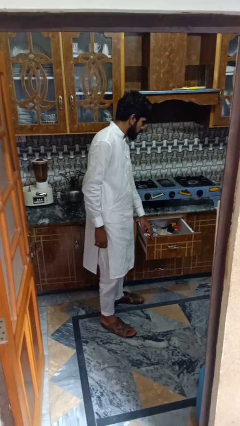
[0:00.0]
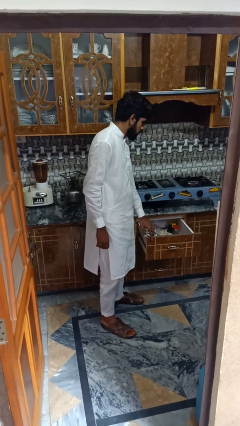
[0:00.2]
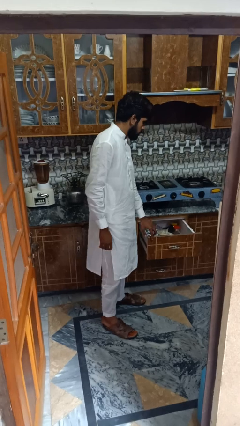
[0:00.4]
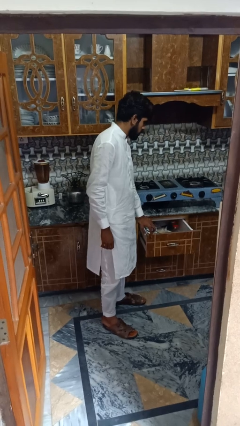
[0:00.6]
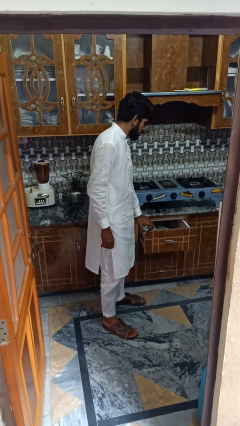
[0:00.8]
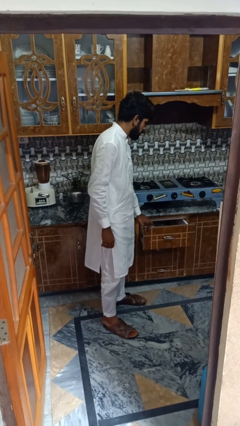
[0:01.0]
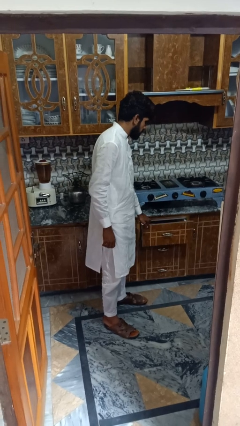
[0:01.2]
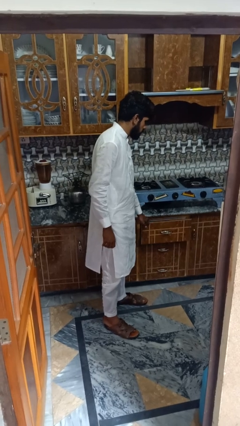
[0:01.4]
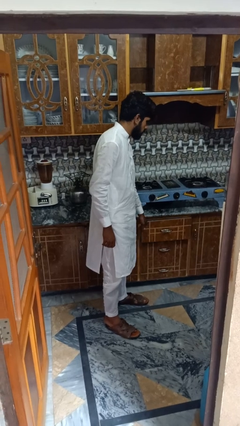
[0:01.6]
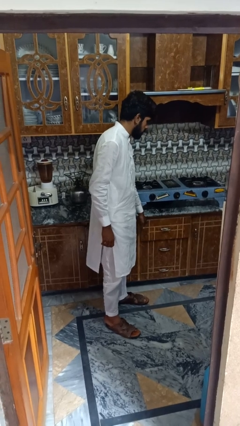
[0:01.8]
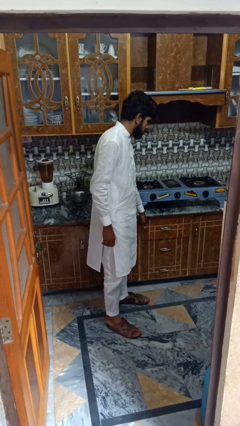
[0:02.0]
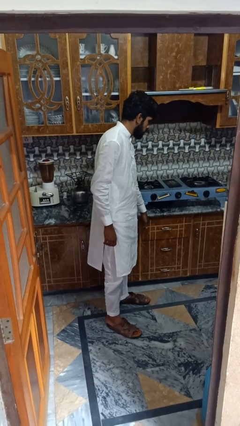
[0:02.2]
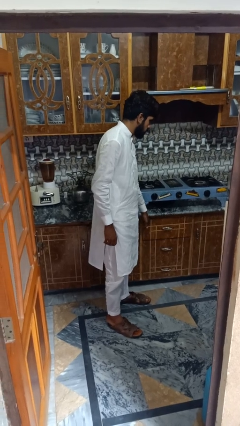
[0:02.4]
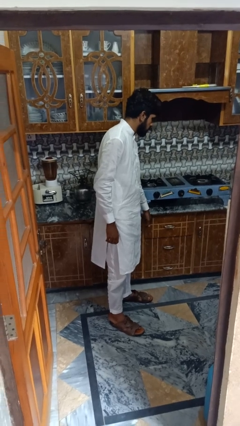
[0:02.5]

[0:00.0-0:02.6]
person closes kitchen drawer

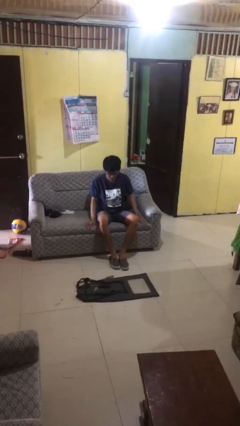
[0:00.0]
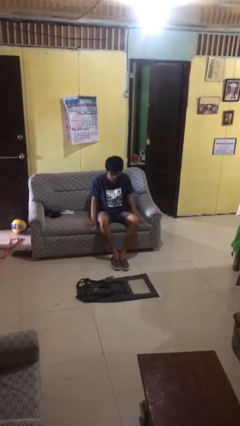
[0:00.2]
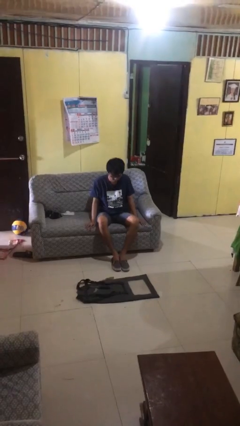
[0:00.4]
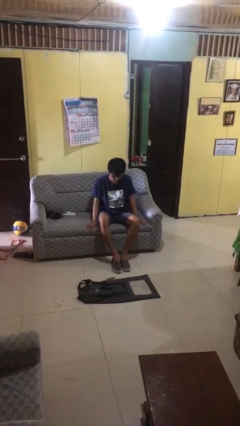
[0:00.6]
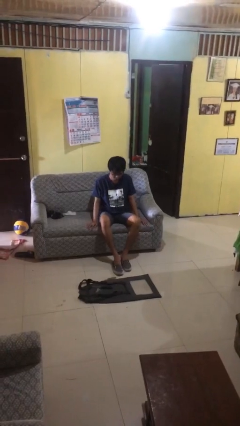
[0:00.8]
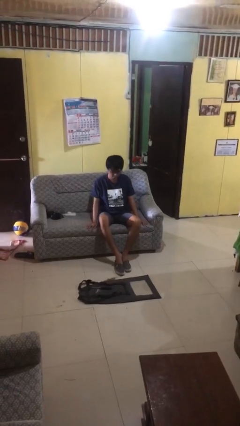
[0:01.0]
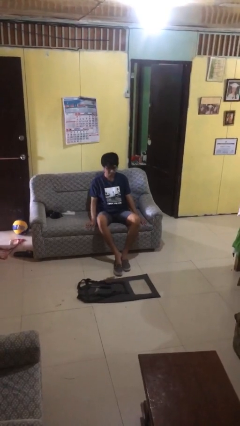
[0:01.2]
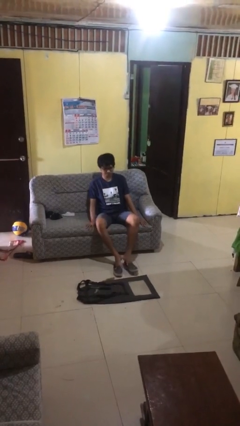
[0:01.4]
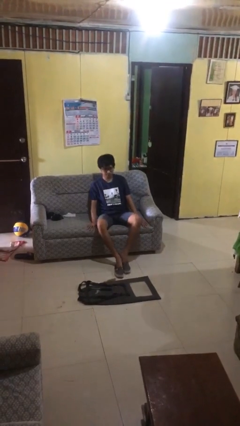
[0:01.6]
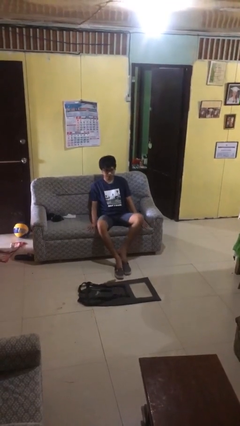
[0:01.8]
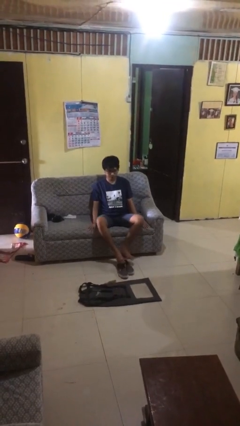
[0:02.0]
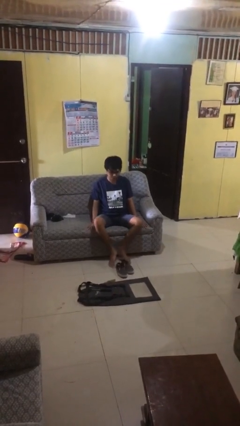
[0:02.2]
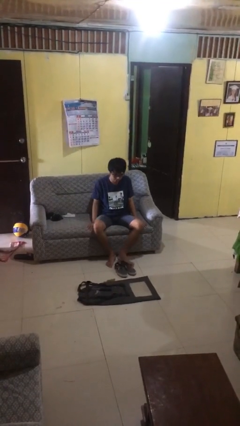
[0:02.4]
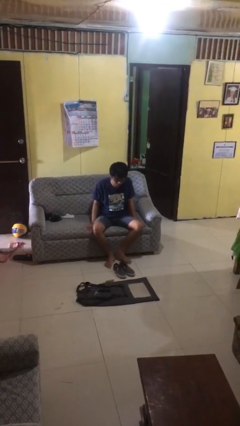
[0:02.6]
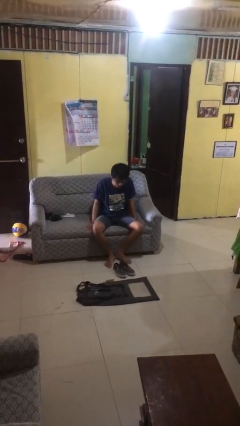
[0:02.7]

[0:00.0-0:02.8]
person takes off shoes

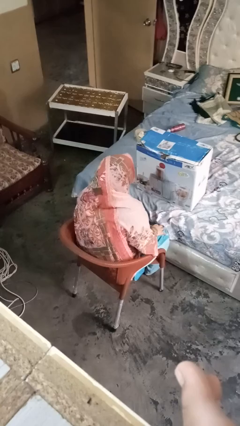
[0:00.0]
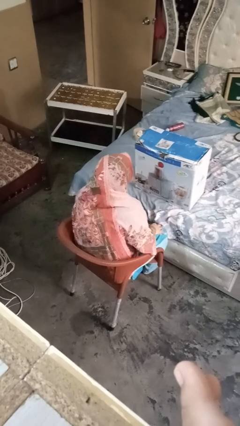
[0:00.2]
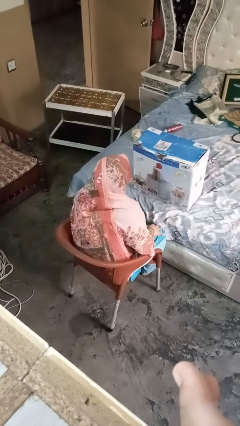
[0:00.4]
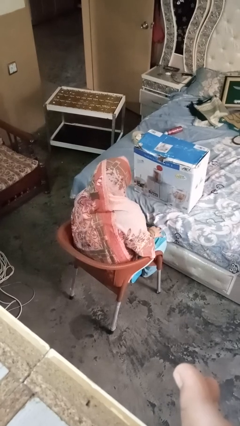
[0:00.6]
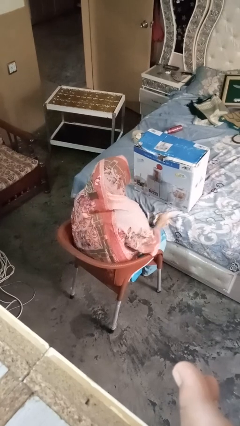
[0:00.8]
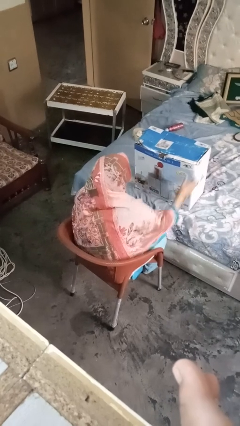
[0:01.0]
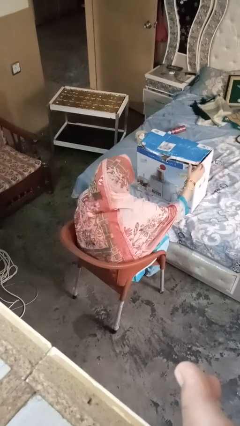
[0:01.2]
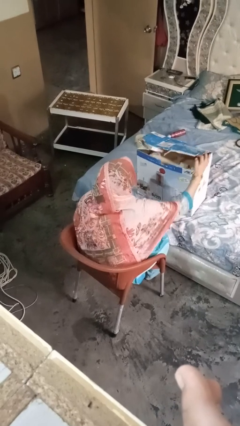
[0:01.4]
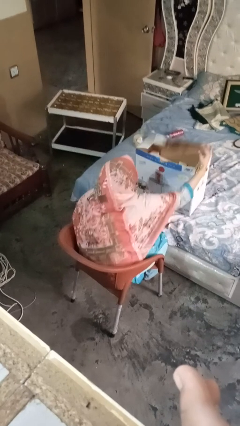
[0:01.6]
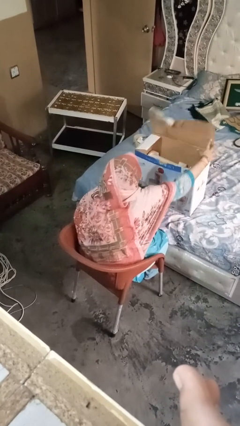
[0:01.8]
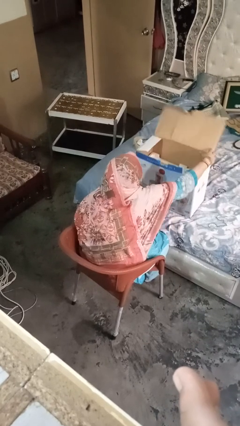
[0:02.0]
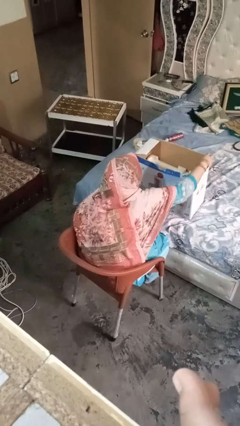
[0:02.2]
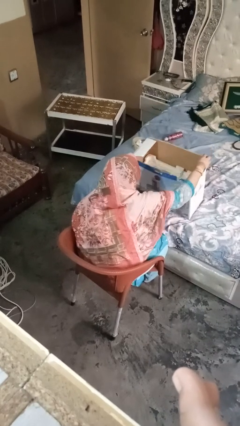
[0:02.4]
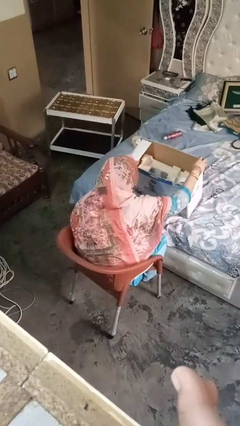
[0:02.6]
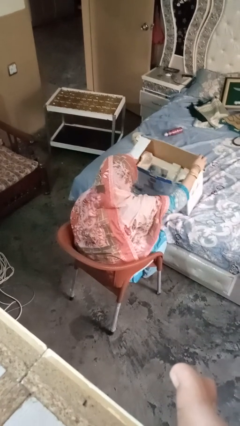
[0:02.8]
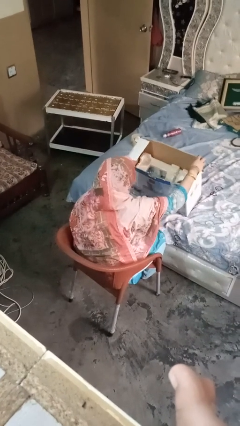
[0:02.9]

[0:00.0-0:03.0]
person opens box

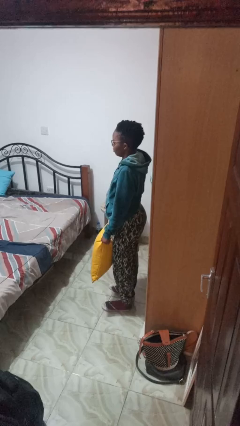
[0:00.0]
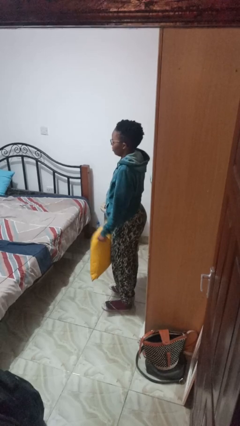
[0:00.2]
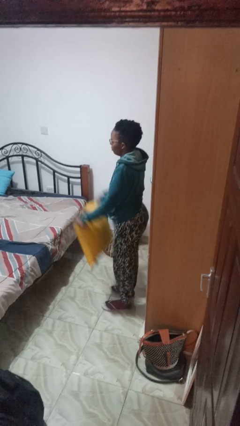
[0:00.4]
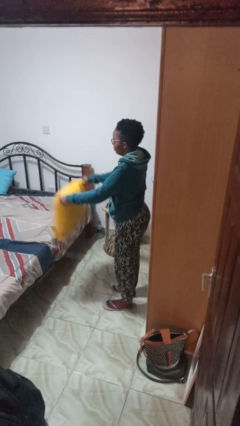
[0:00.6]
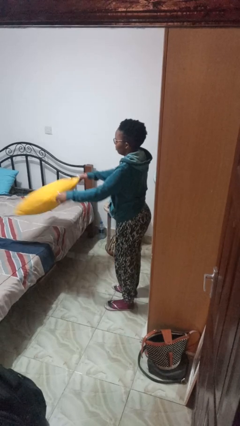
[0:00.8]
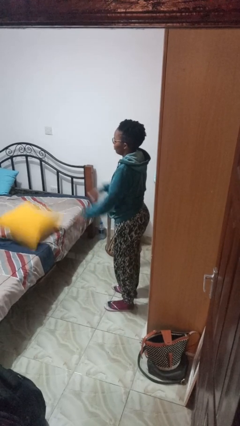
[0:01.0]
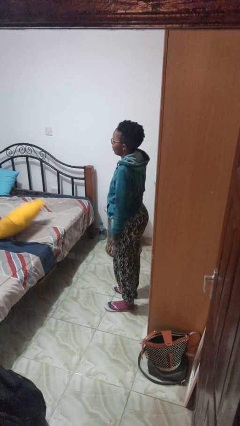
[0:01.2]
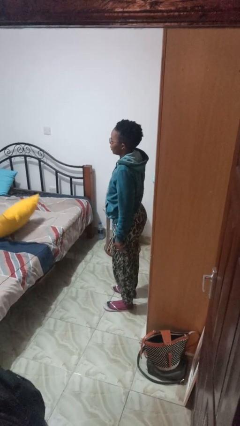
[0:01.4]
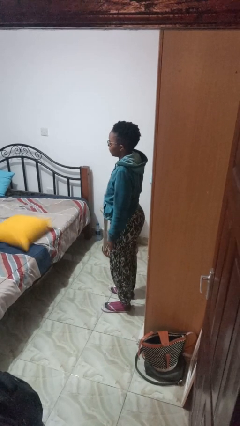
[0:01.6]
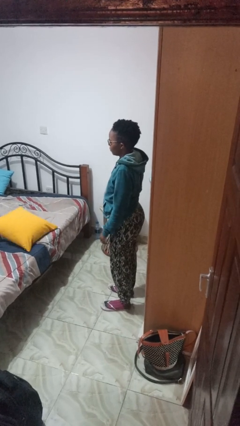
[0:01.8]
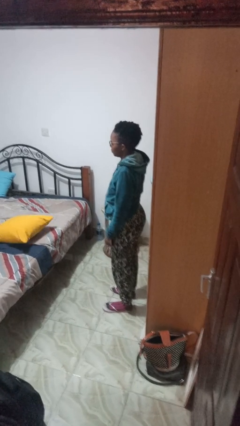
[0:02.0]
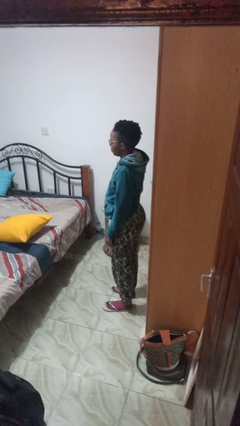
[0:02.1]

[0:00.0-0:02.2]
person throws object on bed

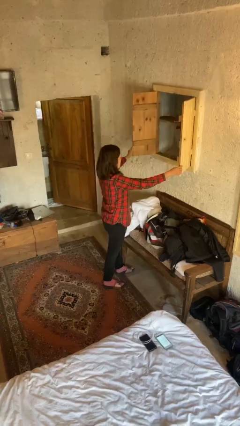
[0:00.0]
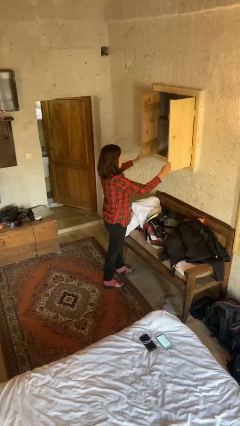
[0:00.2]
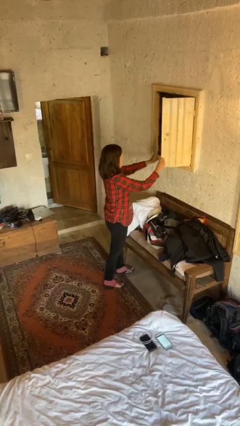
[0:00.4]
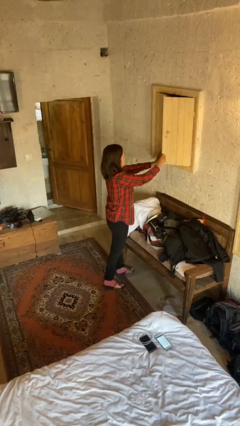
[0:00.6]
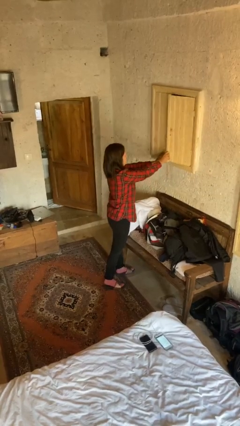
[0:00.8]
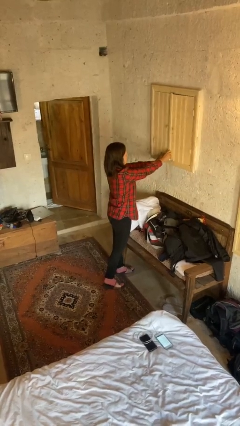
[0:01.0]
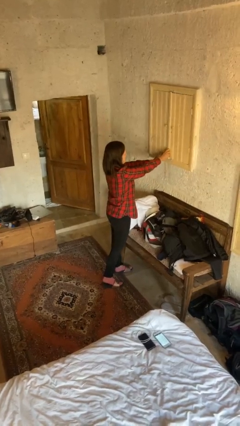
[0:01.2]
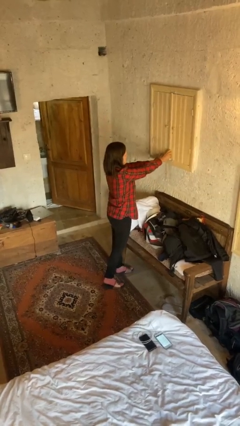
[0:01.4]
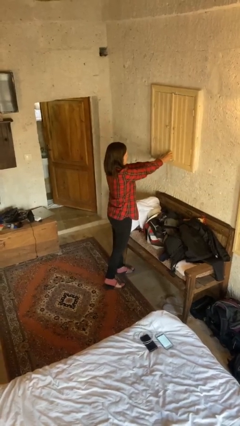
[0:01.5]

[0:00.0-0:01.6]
person closes closet door

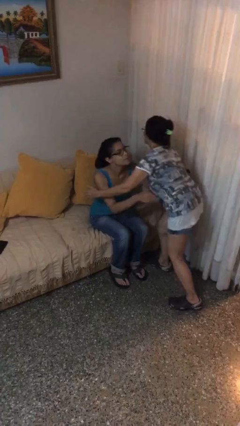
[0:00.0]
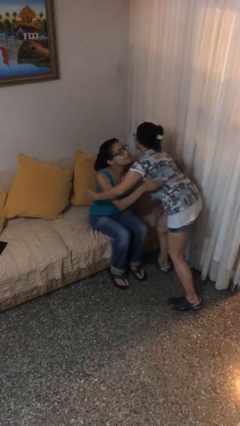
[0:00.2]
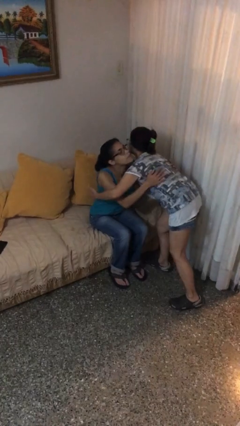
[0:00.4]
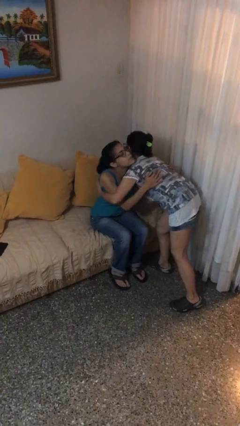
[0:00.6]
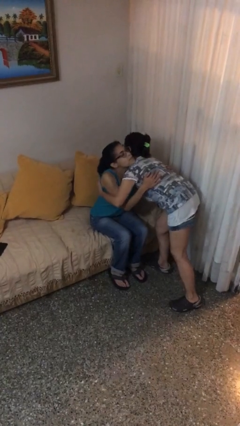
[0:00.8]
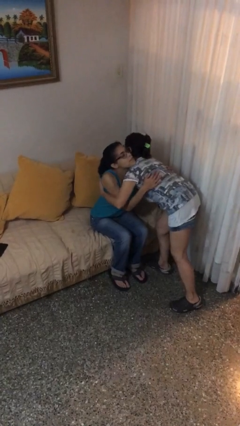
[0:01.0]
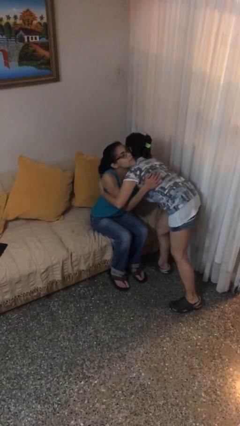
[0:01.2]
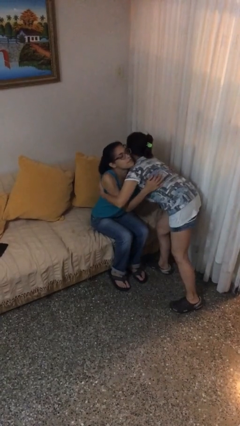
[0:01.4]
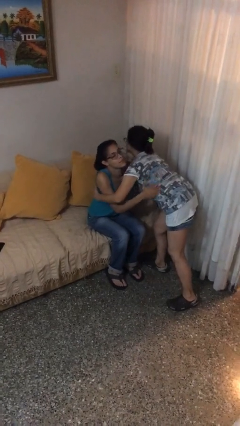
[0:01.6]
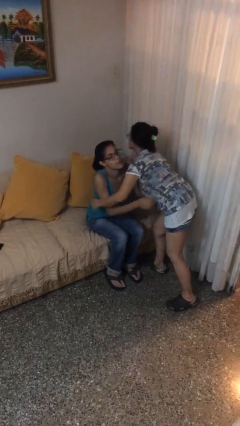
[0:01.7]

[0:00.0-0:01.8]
person embraces person

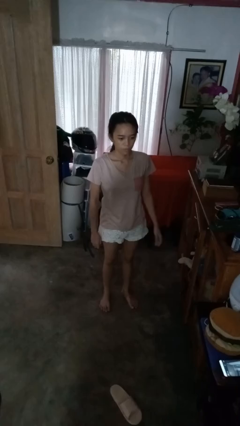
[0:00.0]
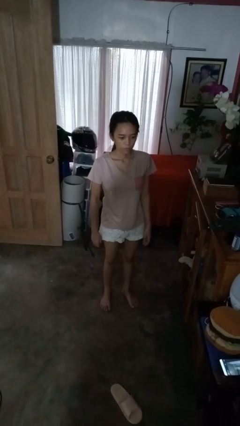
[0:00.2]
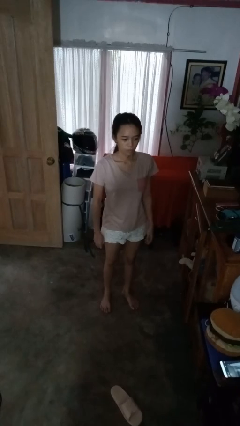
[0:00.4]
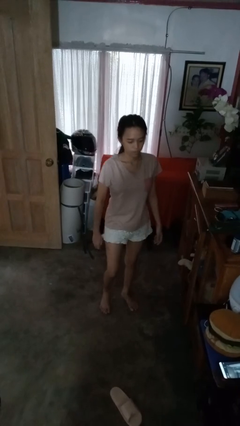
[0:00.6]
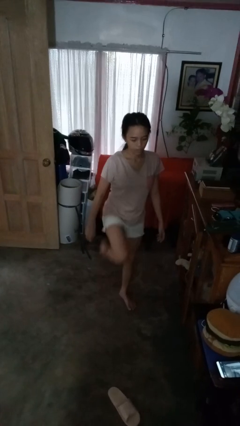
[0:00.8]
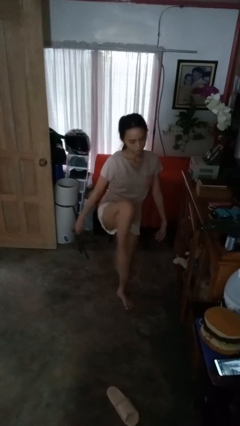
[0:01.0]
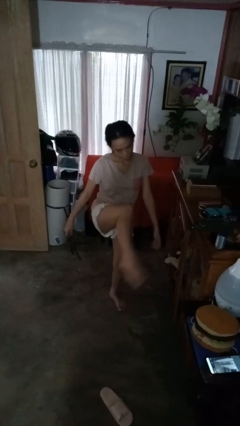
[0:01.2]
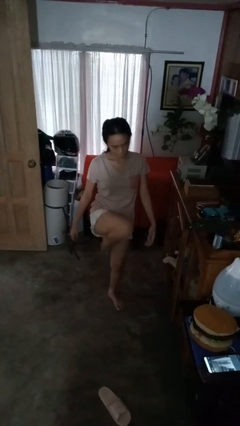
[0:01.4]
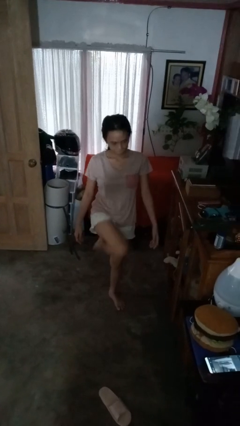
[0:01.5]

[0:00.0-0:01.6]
person karate kicks

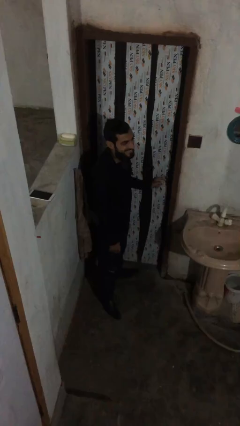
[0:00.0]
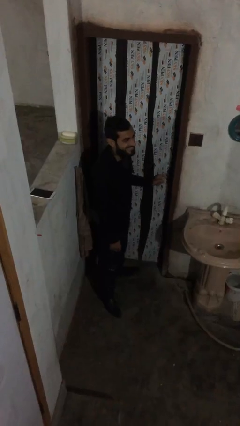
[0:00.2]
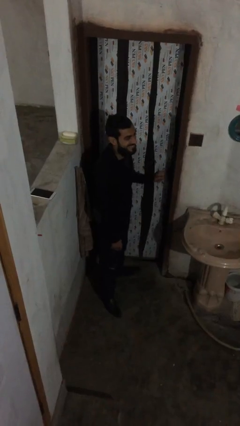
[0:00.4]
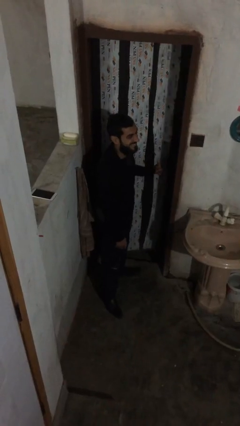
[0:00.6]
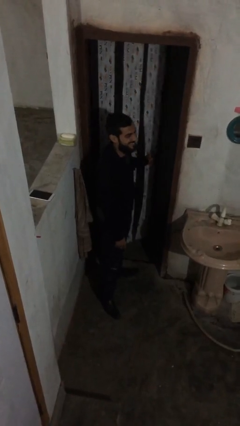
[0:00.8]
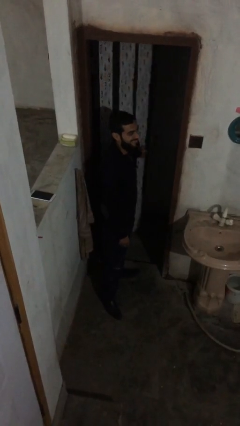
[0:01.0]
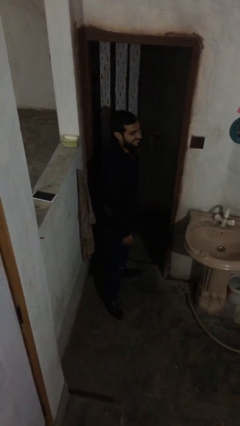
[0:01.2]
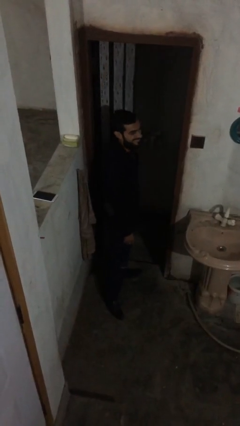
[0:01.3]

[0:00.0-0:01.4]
person opens facility door

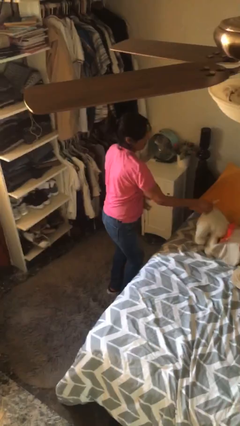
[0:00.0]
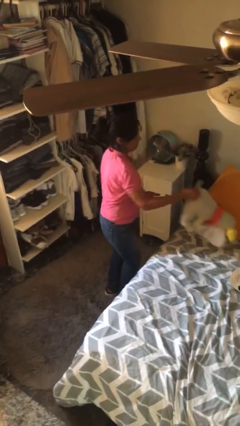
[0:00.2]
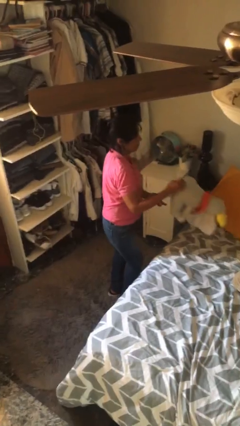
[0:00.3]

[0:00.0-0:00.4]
person picks up object from bed
